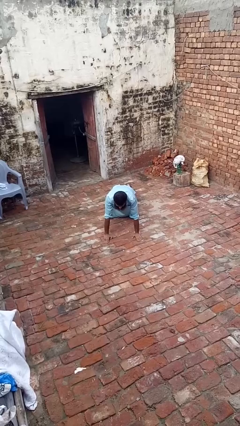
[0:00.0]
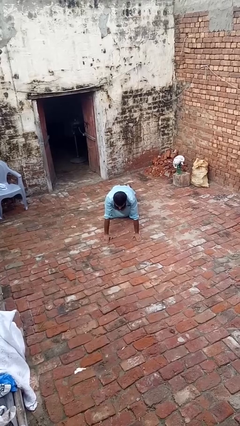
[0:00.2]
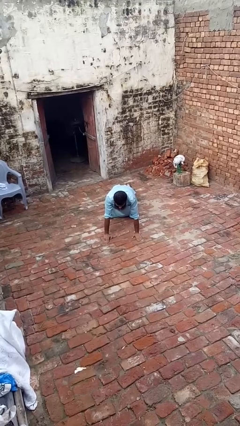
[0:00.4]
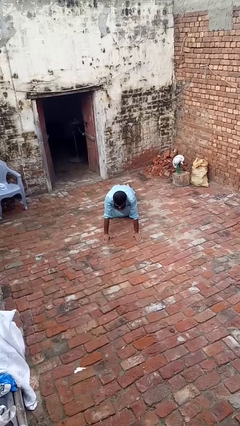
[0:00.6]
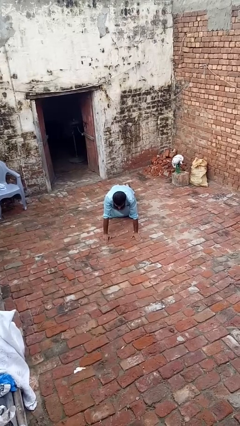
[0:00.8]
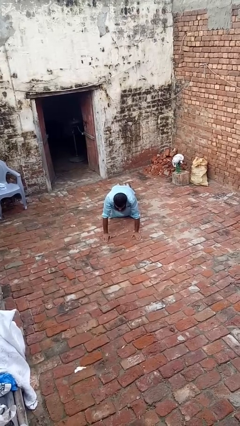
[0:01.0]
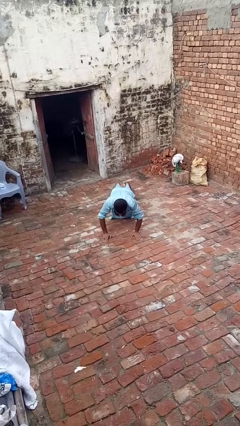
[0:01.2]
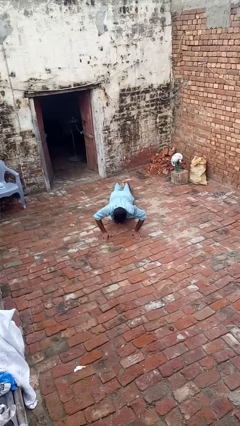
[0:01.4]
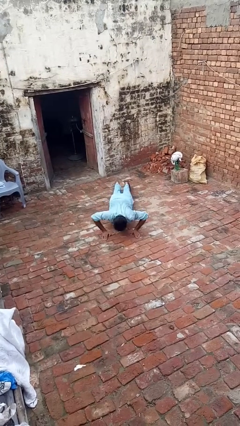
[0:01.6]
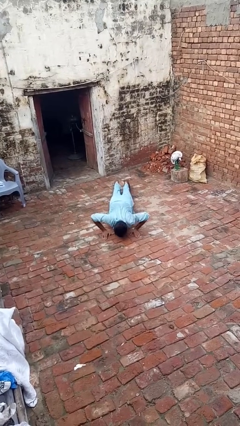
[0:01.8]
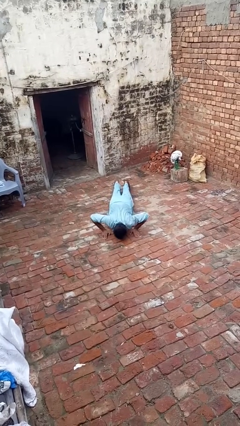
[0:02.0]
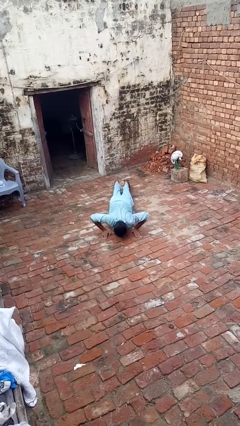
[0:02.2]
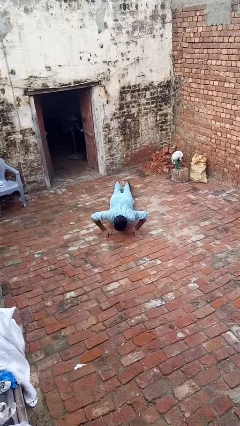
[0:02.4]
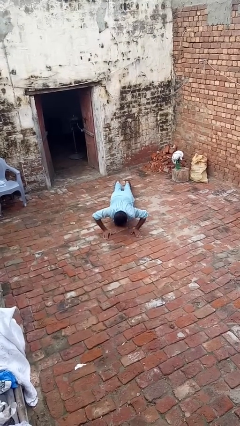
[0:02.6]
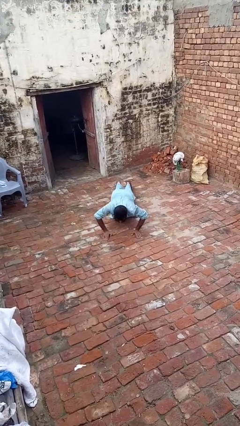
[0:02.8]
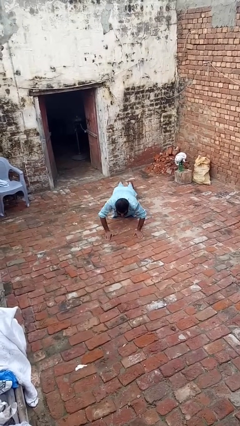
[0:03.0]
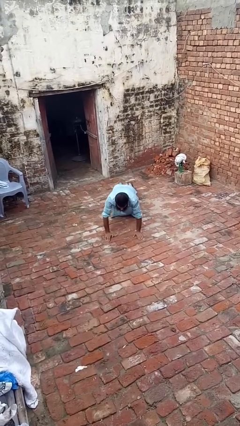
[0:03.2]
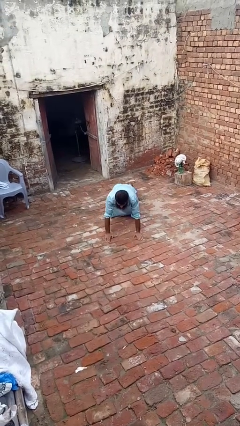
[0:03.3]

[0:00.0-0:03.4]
person exercises with pushup

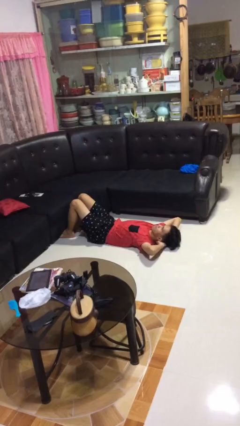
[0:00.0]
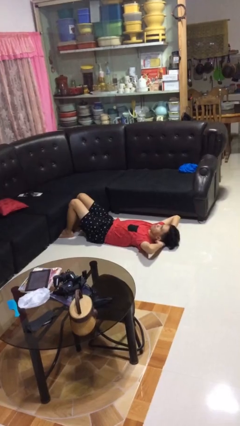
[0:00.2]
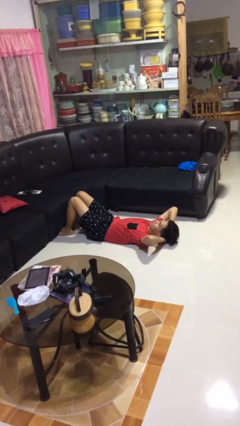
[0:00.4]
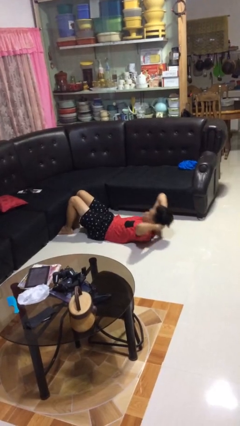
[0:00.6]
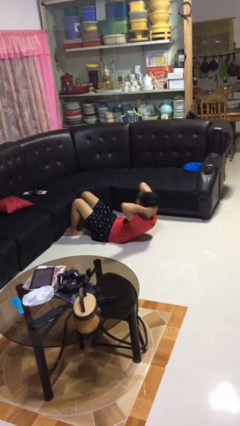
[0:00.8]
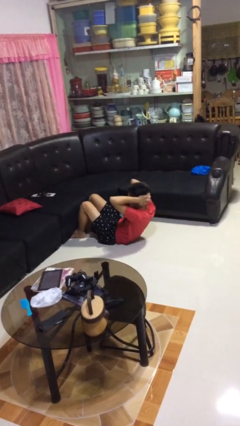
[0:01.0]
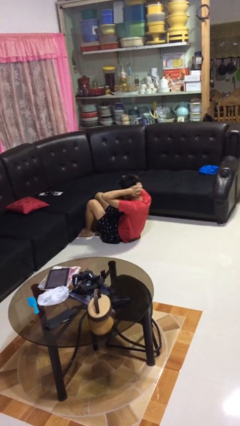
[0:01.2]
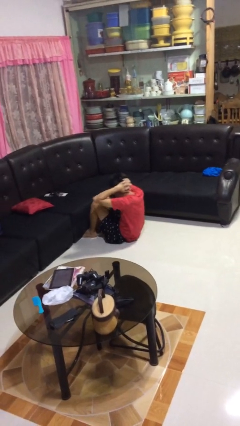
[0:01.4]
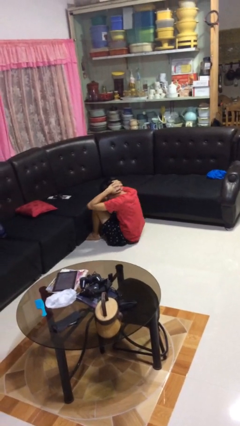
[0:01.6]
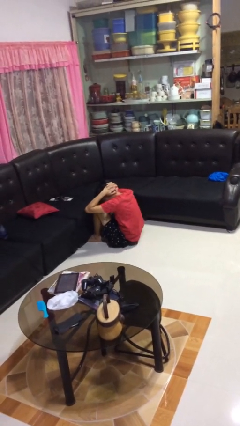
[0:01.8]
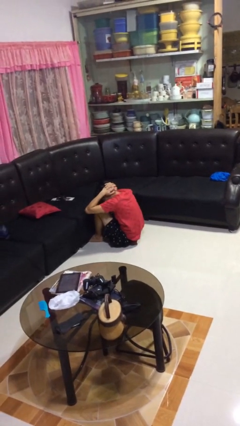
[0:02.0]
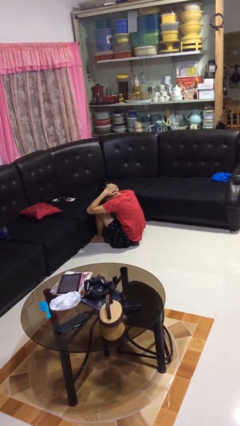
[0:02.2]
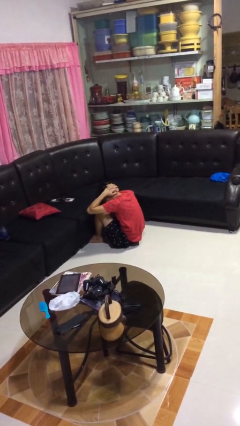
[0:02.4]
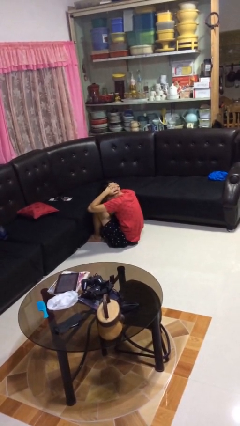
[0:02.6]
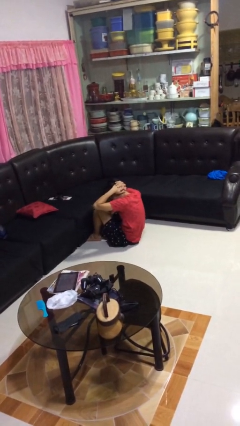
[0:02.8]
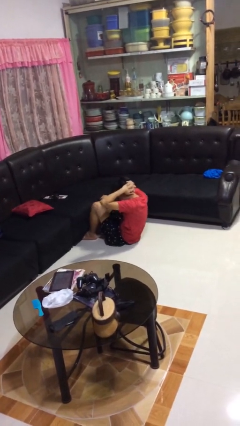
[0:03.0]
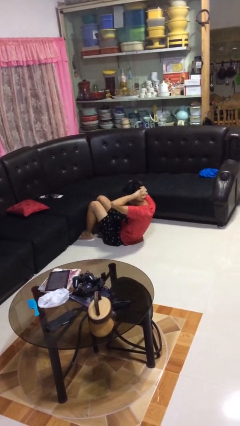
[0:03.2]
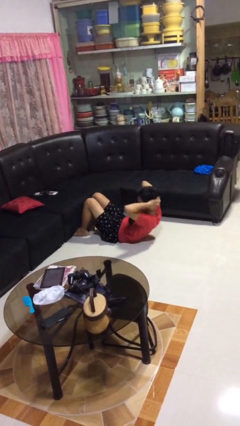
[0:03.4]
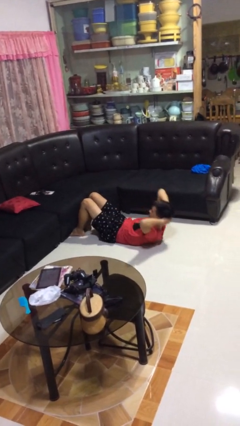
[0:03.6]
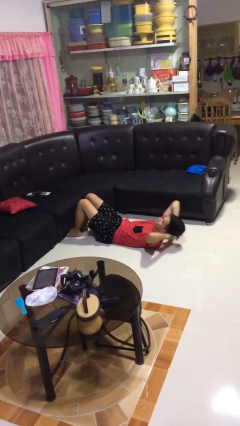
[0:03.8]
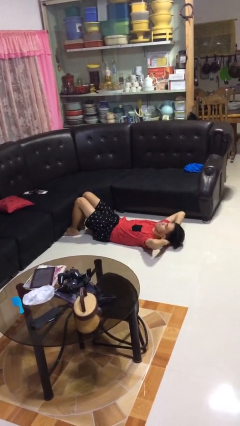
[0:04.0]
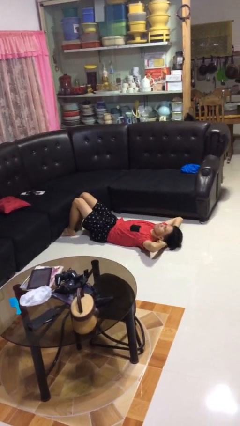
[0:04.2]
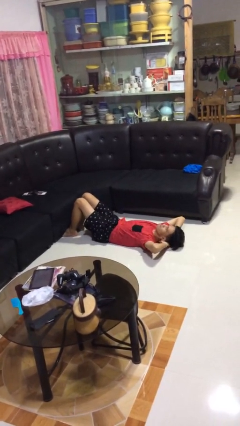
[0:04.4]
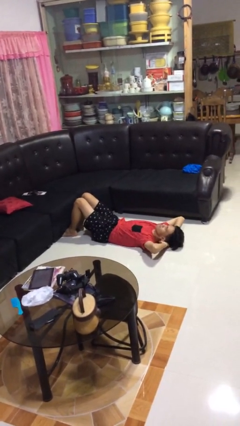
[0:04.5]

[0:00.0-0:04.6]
person exercises with situp

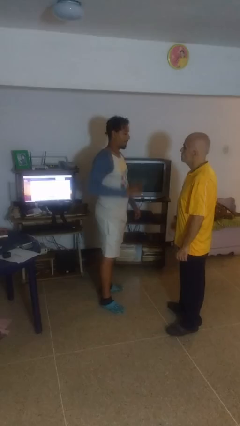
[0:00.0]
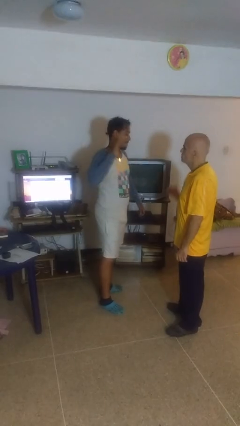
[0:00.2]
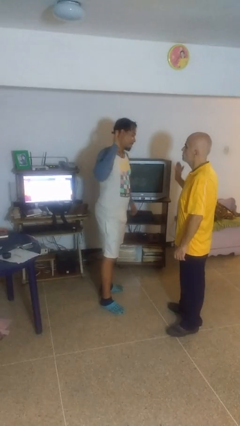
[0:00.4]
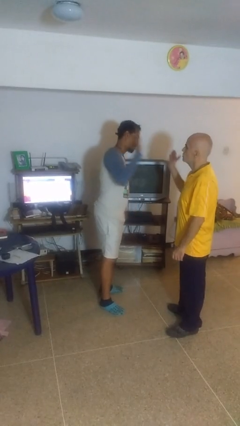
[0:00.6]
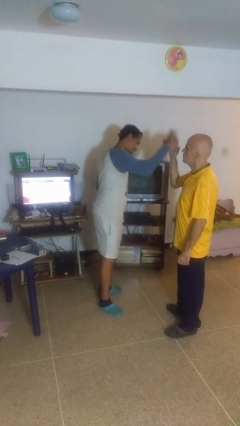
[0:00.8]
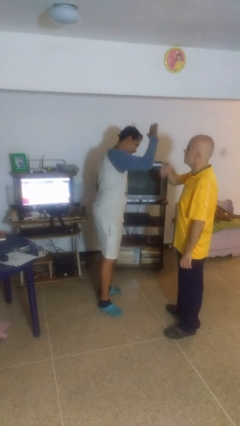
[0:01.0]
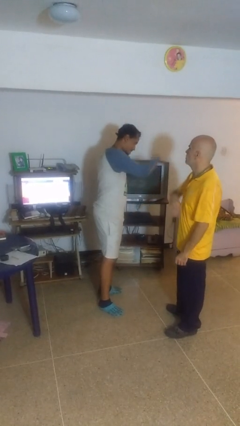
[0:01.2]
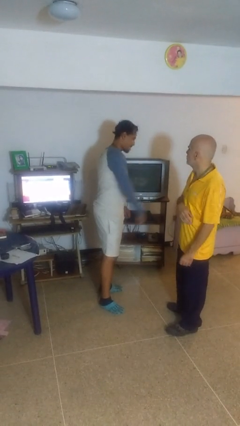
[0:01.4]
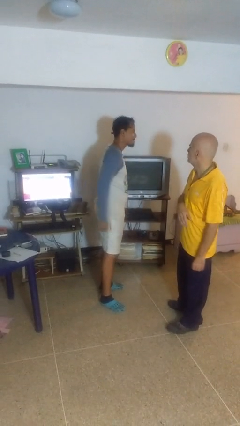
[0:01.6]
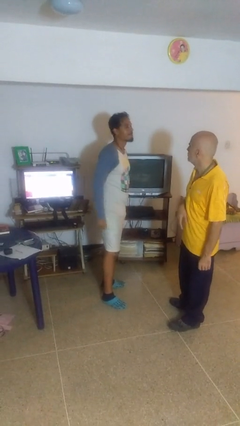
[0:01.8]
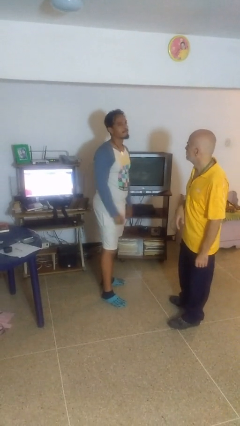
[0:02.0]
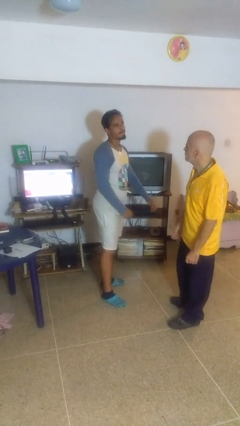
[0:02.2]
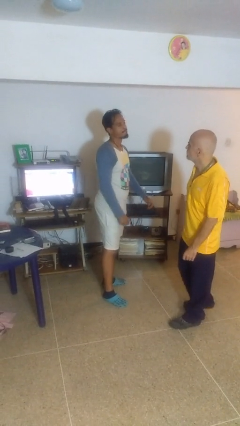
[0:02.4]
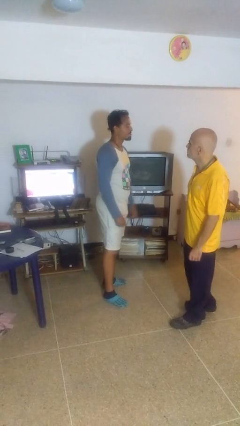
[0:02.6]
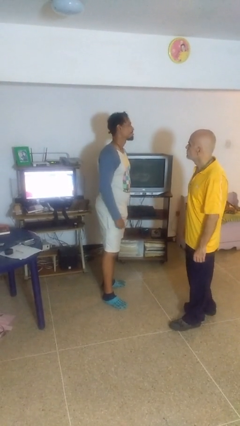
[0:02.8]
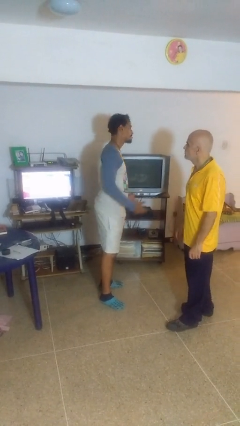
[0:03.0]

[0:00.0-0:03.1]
person highfives hand

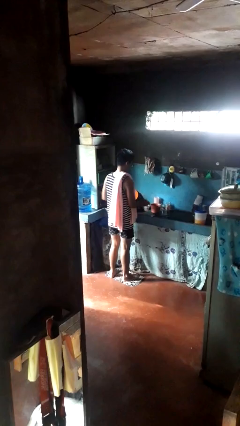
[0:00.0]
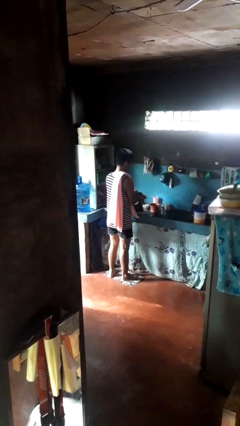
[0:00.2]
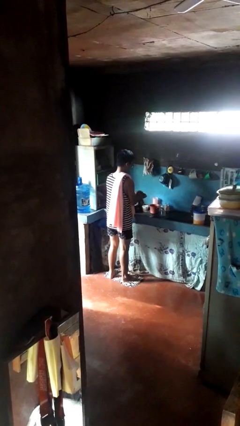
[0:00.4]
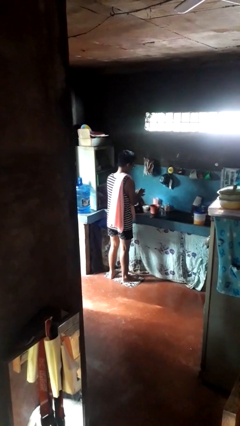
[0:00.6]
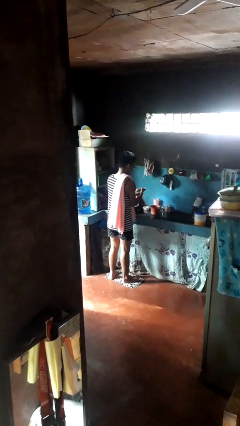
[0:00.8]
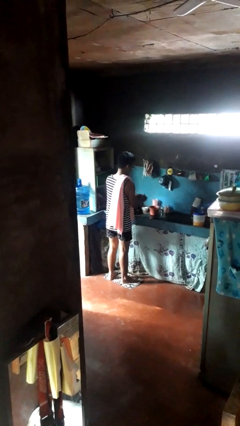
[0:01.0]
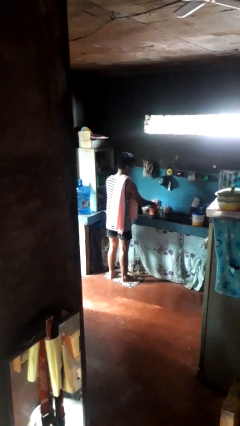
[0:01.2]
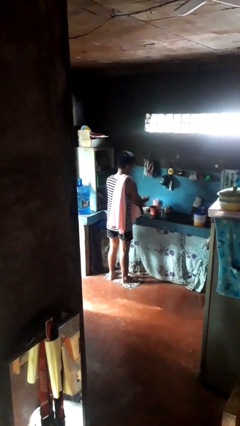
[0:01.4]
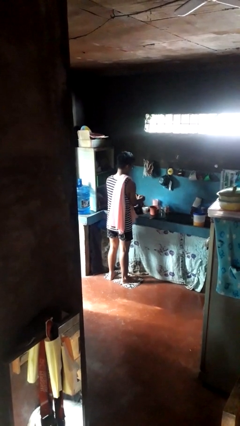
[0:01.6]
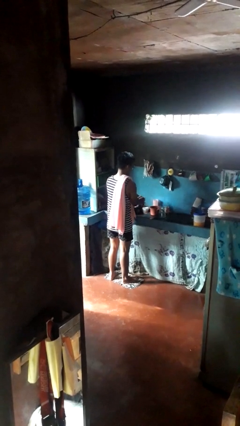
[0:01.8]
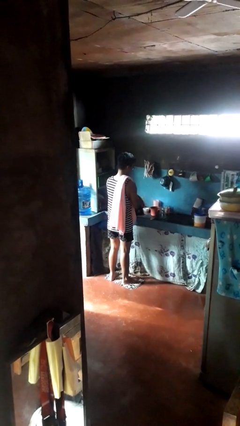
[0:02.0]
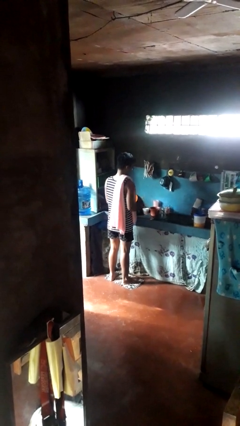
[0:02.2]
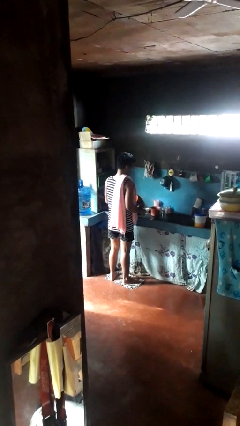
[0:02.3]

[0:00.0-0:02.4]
person washes hands

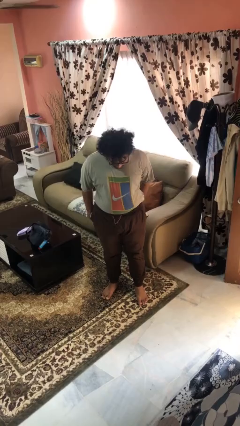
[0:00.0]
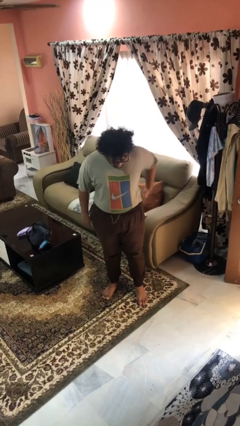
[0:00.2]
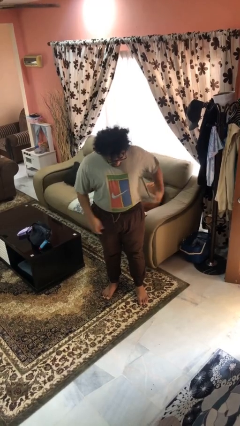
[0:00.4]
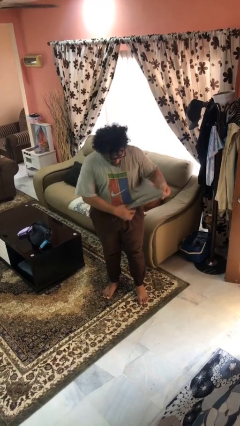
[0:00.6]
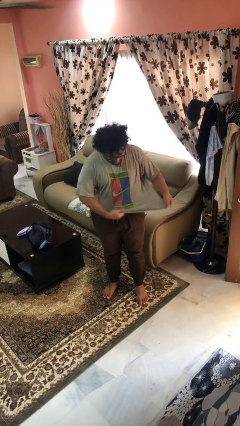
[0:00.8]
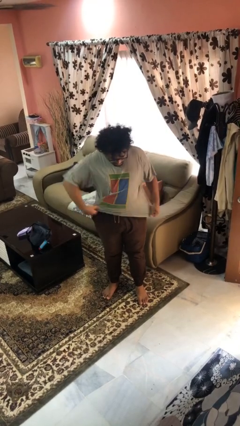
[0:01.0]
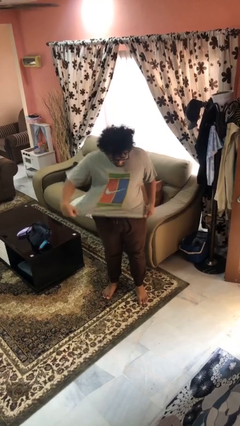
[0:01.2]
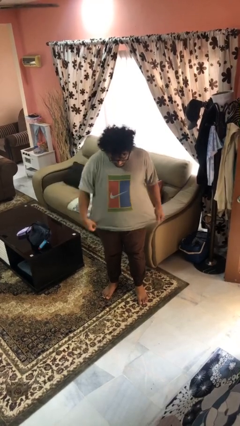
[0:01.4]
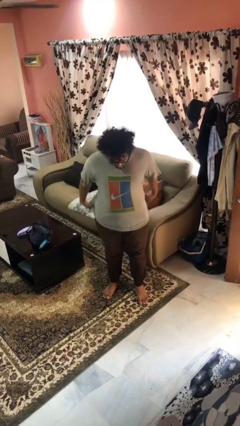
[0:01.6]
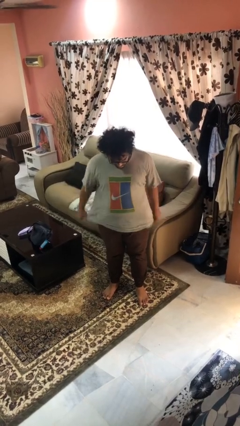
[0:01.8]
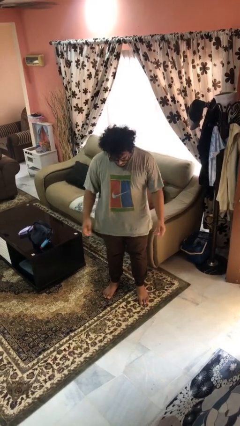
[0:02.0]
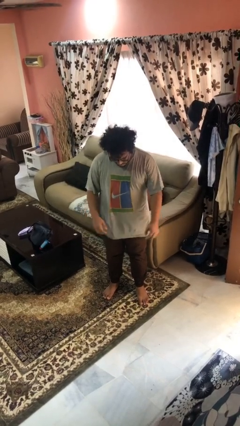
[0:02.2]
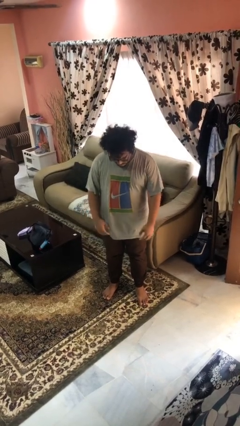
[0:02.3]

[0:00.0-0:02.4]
person untucks shirt

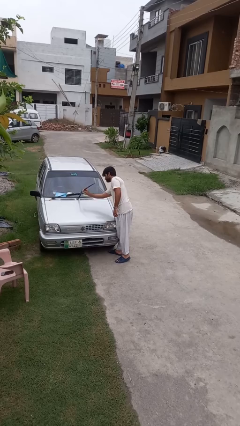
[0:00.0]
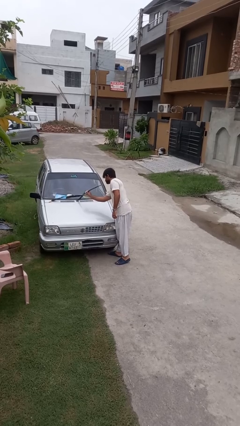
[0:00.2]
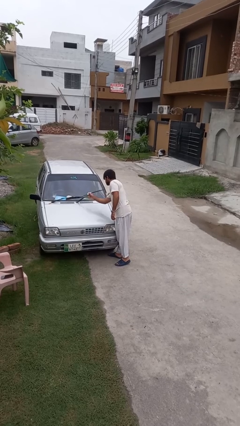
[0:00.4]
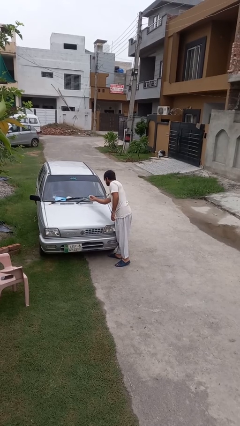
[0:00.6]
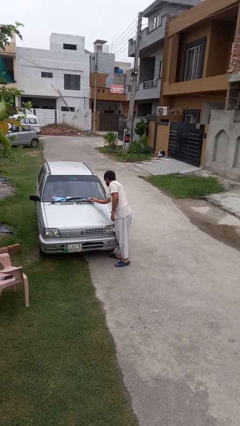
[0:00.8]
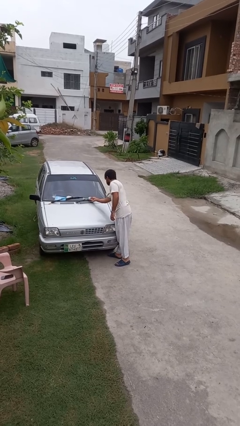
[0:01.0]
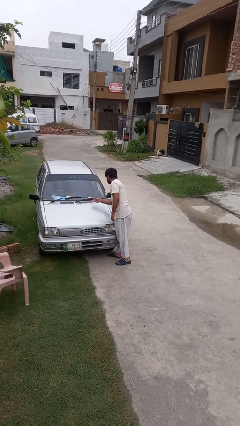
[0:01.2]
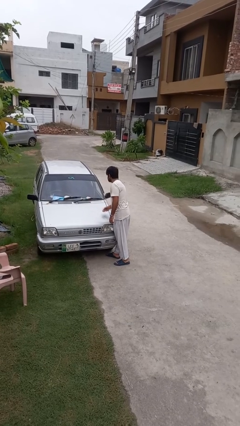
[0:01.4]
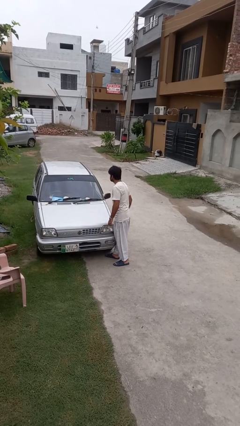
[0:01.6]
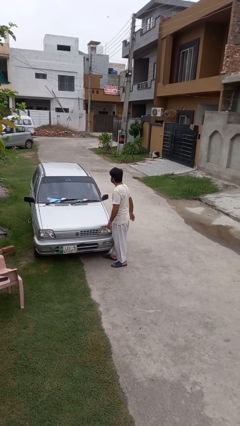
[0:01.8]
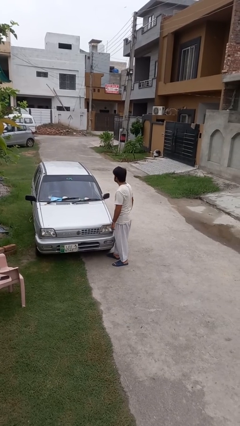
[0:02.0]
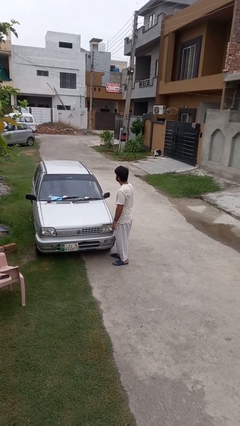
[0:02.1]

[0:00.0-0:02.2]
person flips down car wipers
